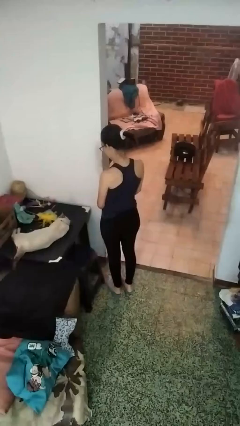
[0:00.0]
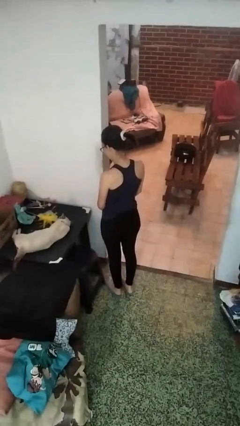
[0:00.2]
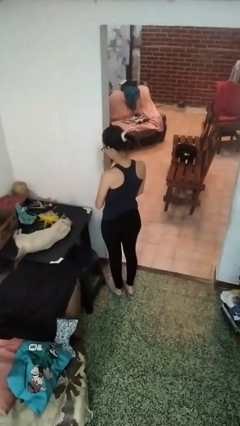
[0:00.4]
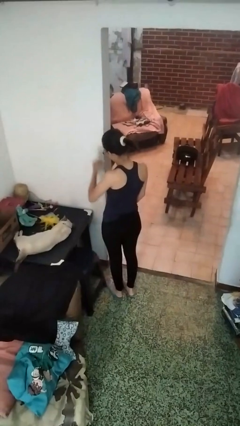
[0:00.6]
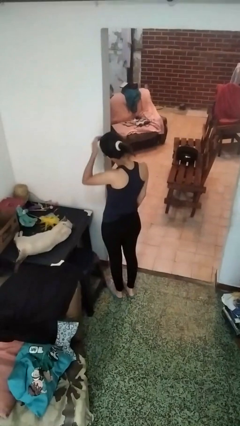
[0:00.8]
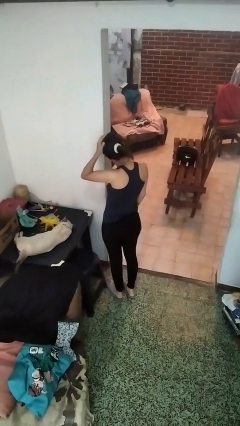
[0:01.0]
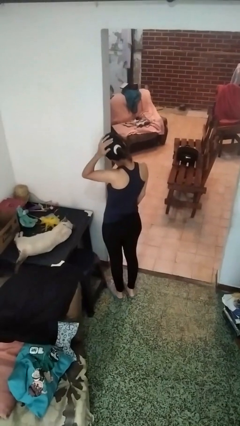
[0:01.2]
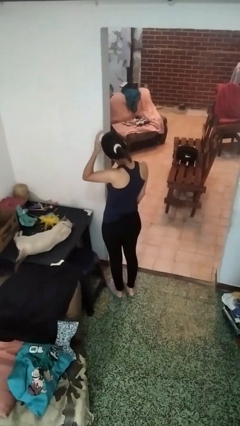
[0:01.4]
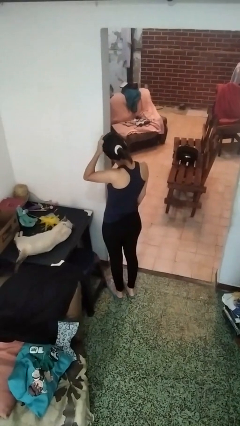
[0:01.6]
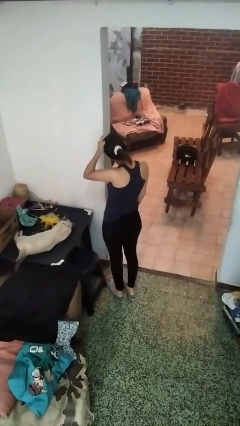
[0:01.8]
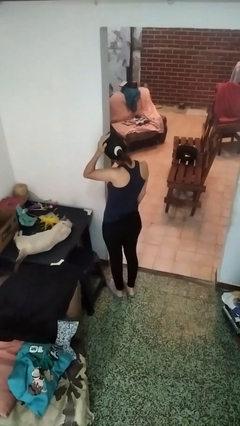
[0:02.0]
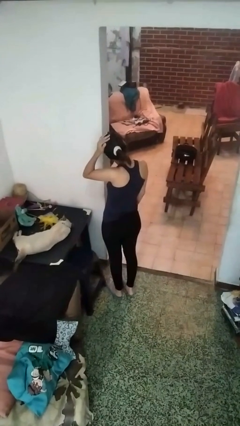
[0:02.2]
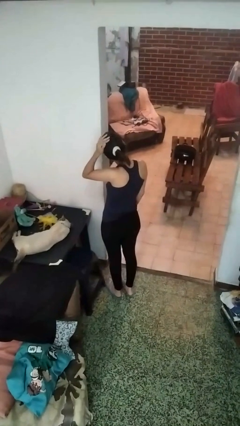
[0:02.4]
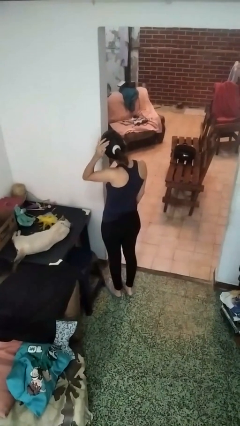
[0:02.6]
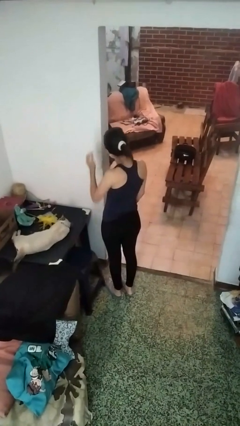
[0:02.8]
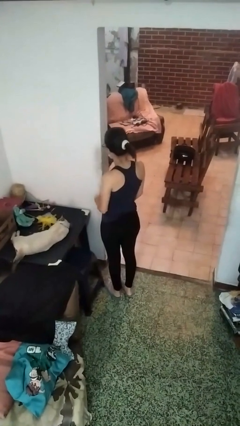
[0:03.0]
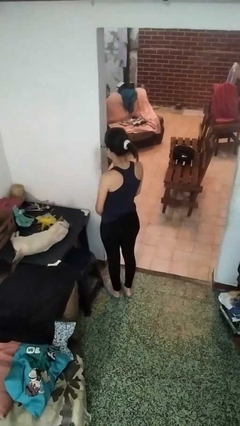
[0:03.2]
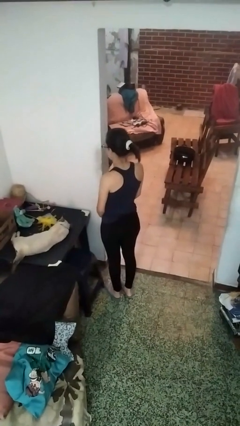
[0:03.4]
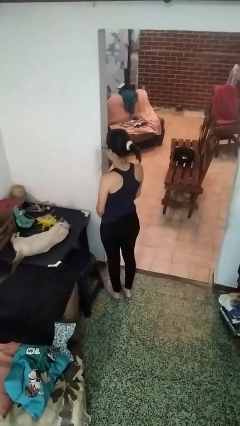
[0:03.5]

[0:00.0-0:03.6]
person pats head

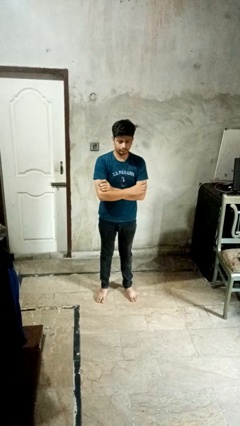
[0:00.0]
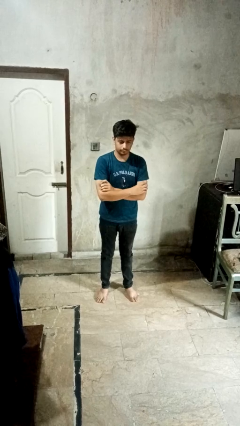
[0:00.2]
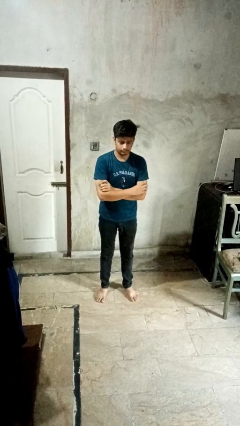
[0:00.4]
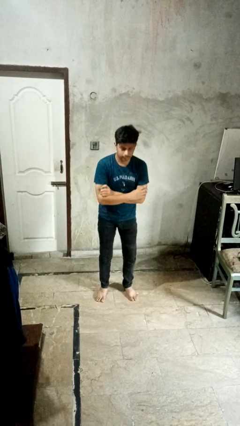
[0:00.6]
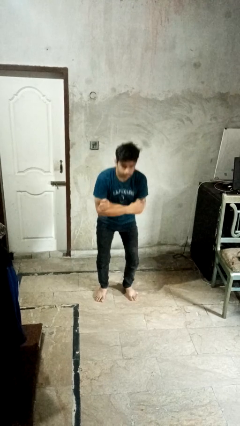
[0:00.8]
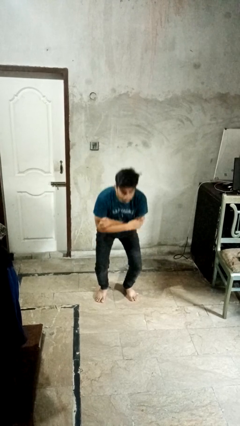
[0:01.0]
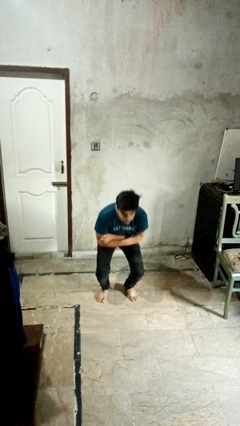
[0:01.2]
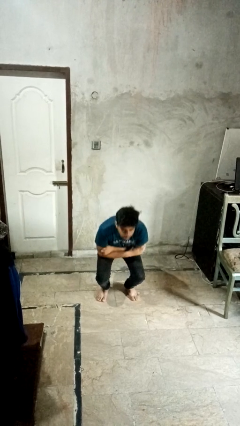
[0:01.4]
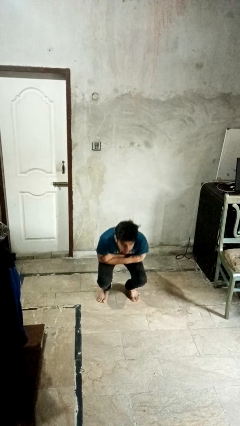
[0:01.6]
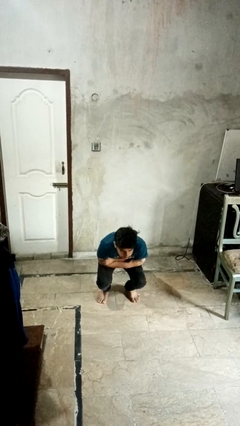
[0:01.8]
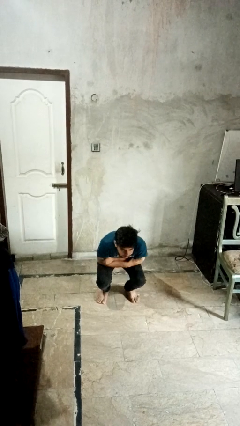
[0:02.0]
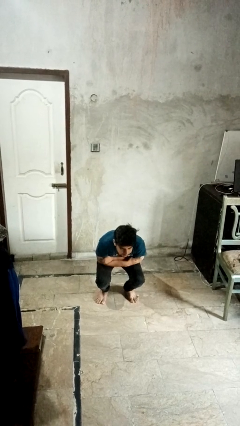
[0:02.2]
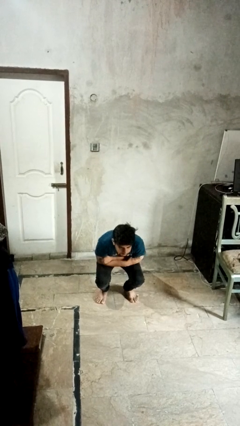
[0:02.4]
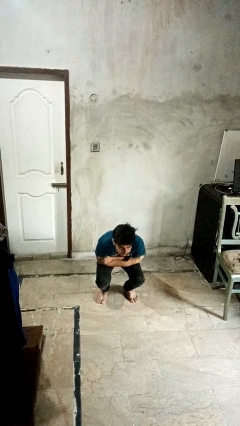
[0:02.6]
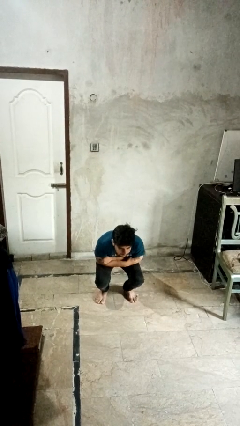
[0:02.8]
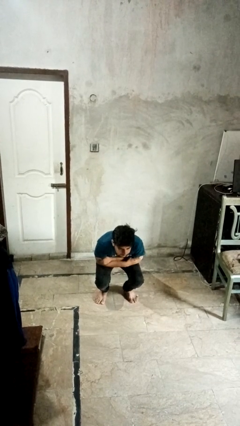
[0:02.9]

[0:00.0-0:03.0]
person squats

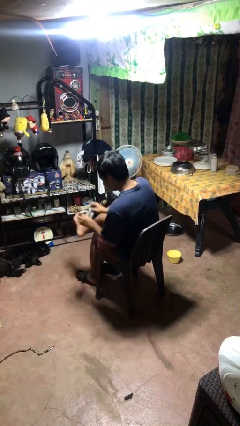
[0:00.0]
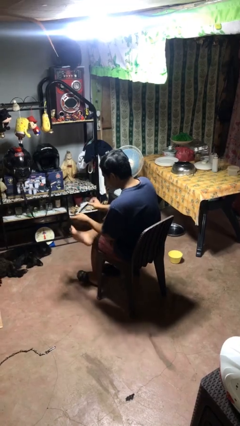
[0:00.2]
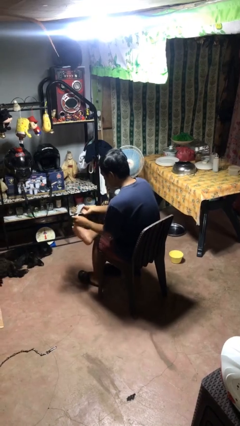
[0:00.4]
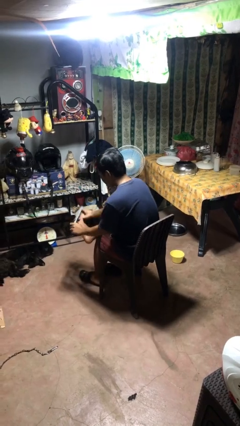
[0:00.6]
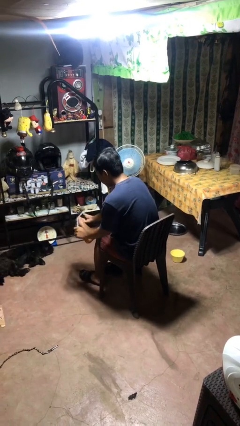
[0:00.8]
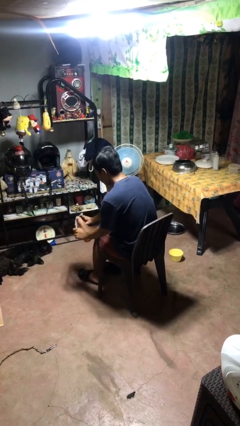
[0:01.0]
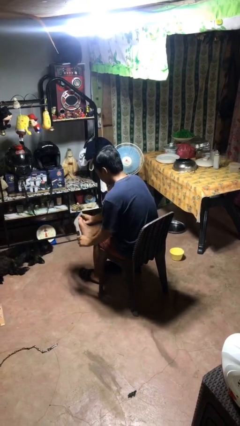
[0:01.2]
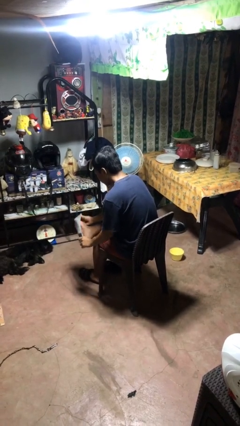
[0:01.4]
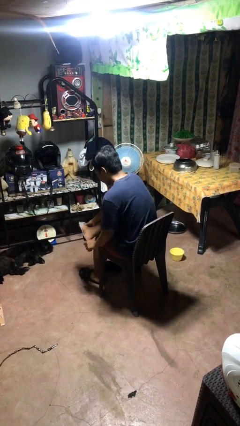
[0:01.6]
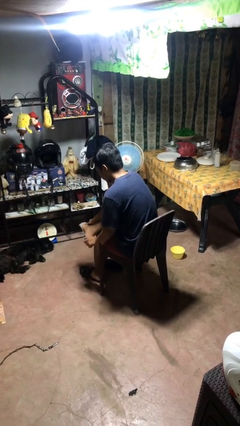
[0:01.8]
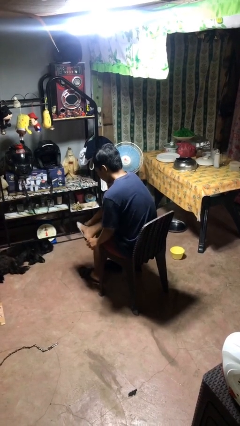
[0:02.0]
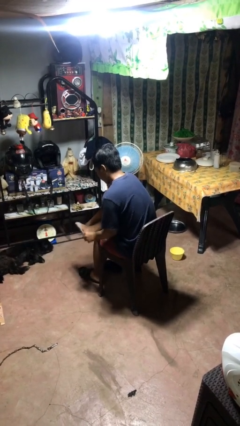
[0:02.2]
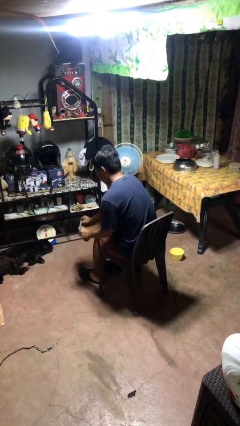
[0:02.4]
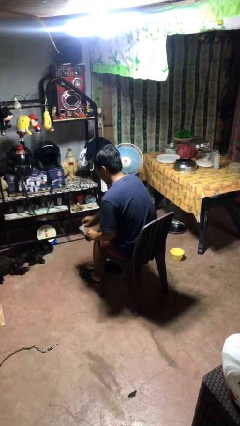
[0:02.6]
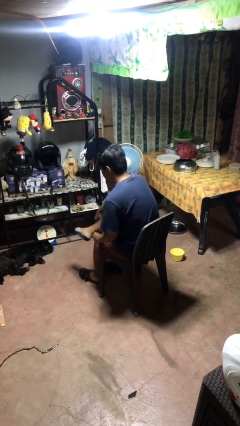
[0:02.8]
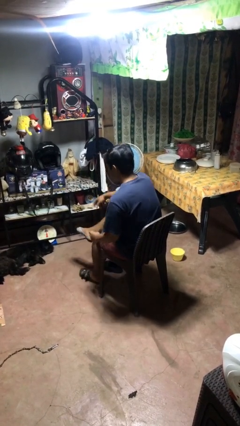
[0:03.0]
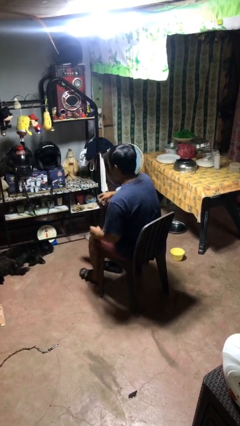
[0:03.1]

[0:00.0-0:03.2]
person puts on socks

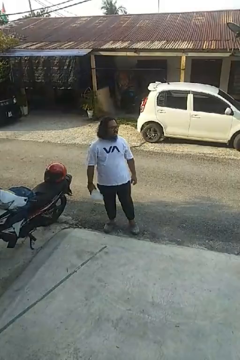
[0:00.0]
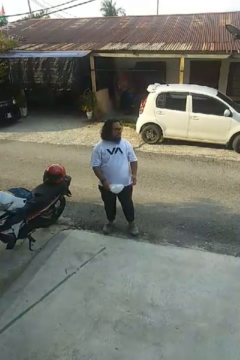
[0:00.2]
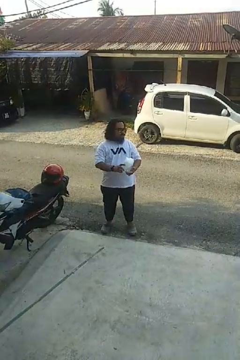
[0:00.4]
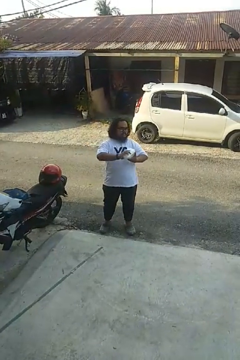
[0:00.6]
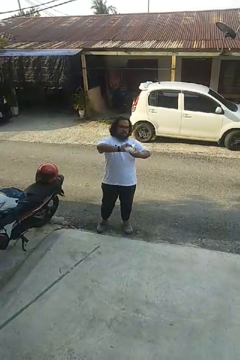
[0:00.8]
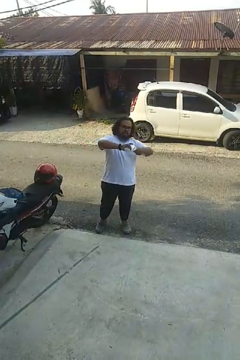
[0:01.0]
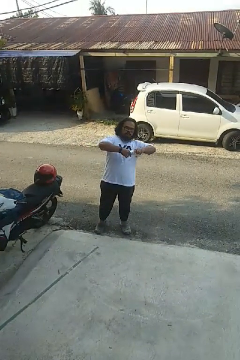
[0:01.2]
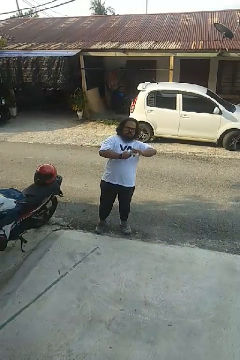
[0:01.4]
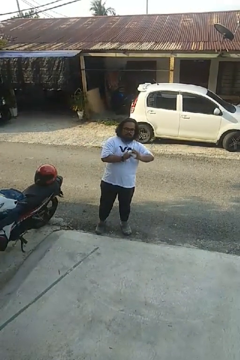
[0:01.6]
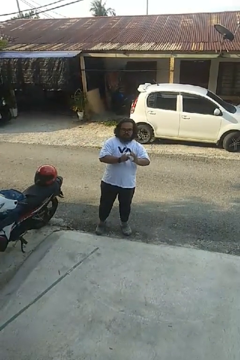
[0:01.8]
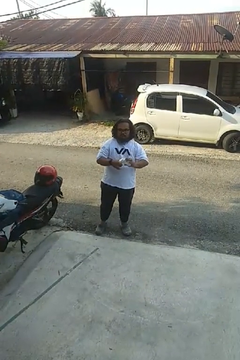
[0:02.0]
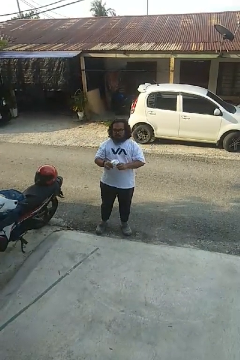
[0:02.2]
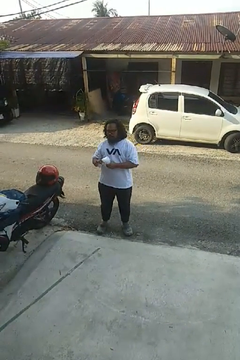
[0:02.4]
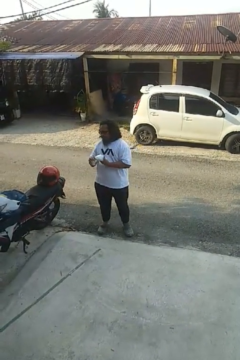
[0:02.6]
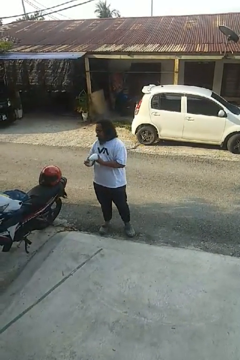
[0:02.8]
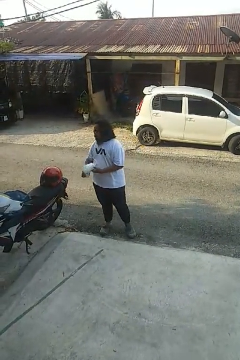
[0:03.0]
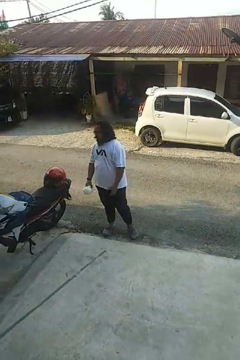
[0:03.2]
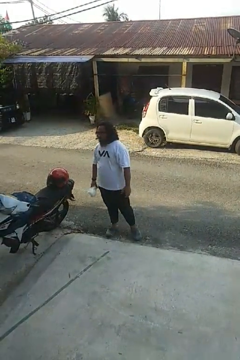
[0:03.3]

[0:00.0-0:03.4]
person squeezes object

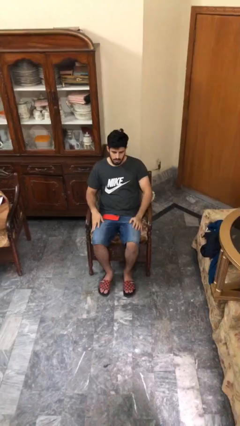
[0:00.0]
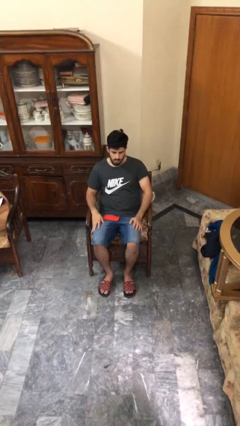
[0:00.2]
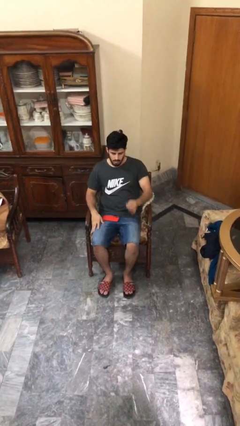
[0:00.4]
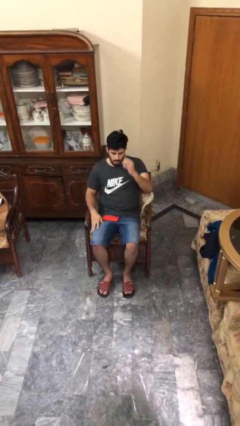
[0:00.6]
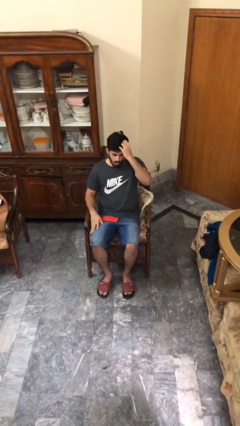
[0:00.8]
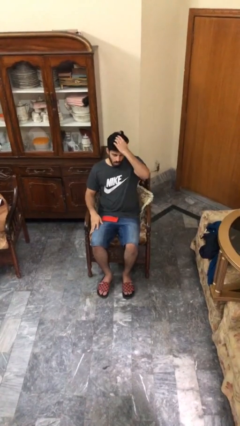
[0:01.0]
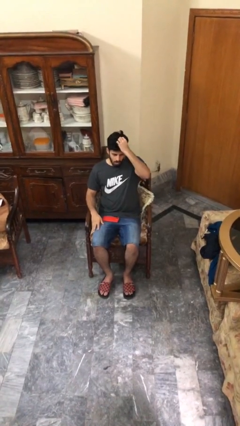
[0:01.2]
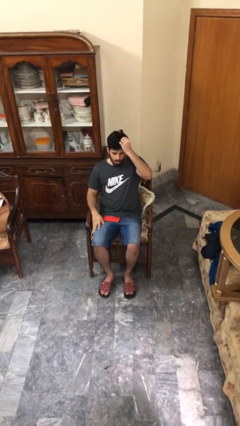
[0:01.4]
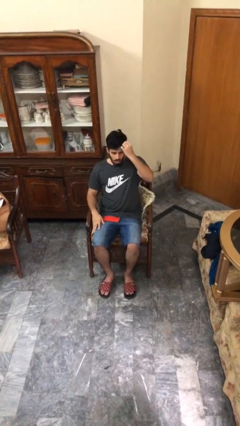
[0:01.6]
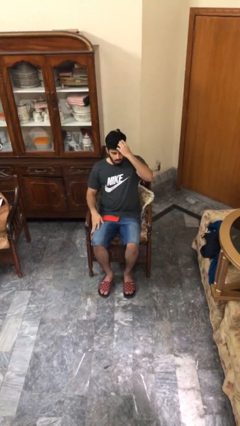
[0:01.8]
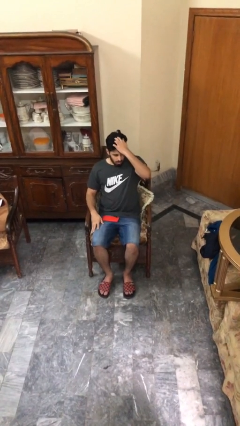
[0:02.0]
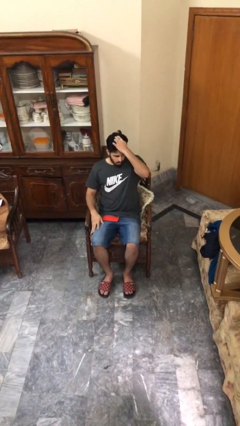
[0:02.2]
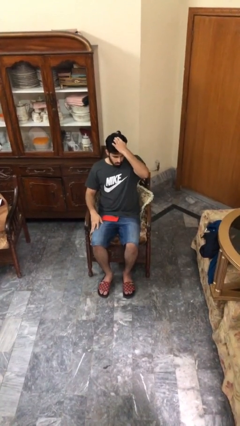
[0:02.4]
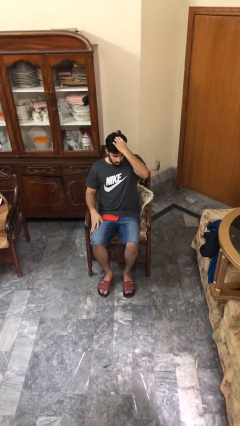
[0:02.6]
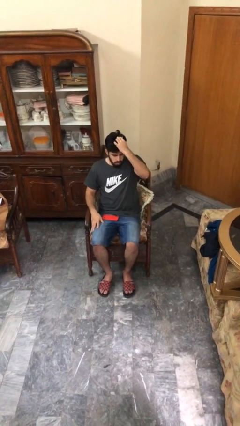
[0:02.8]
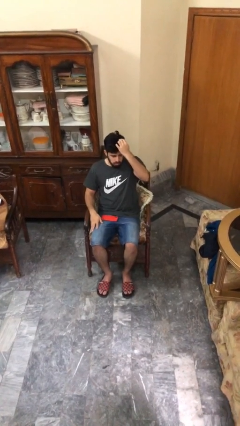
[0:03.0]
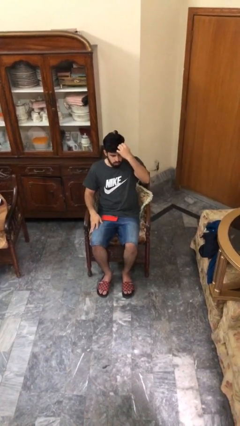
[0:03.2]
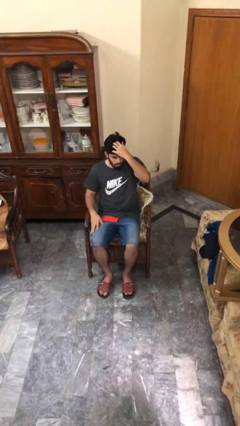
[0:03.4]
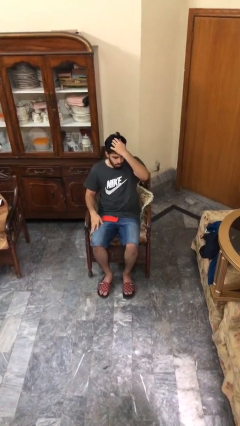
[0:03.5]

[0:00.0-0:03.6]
person strokes hair

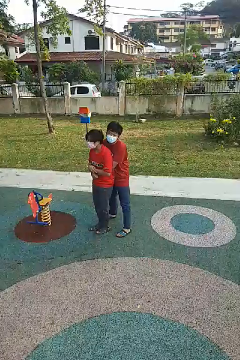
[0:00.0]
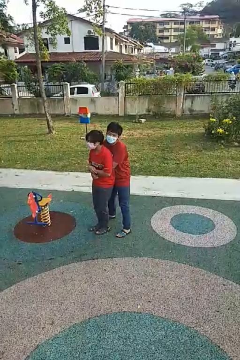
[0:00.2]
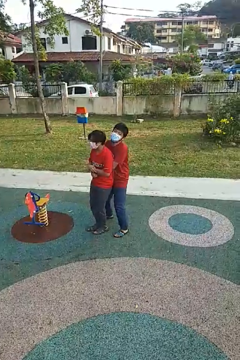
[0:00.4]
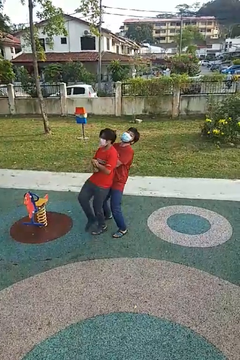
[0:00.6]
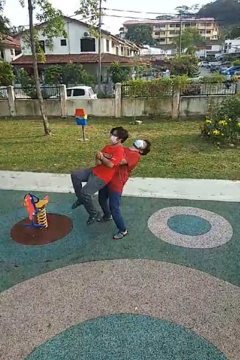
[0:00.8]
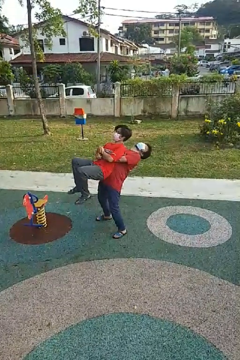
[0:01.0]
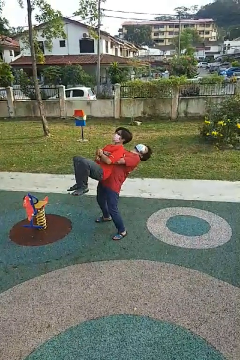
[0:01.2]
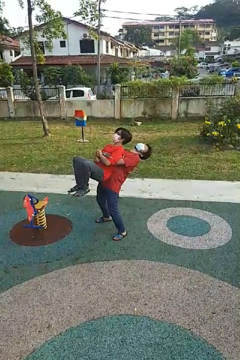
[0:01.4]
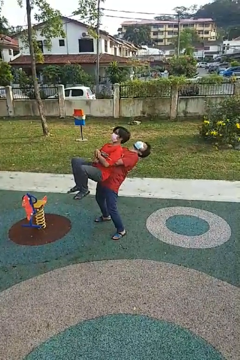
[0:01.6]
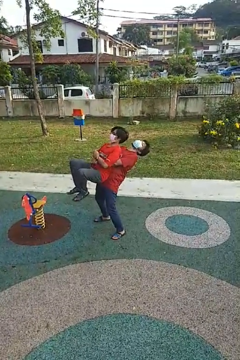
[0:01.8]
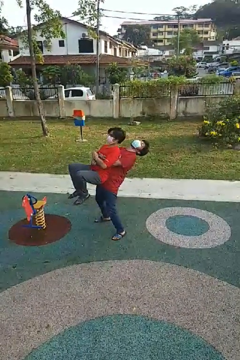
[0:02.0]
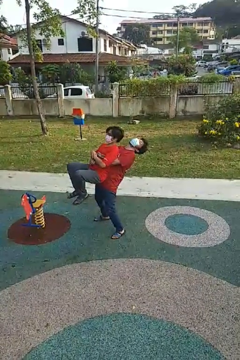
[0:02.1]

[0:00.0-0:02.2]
person picks up person
